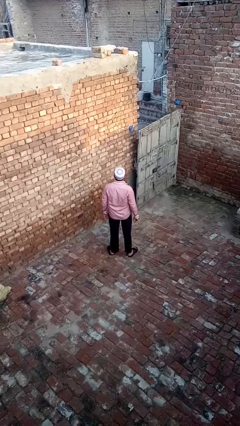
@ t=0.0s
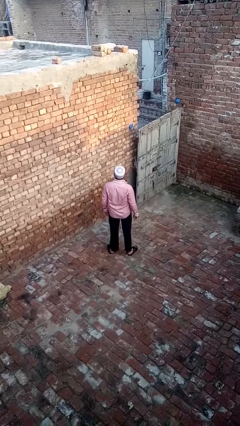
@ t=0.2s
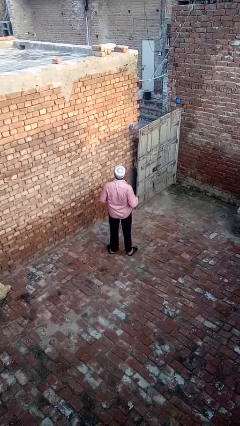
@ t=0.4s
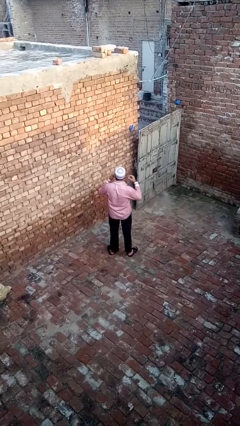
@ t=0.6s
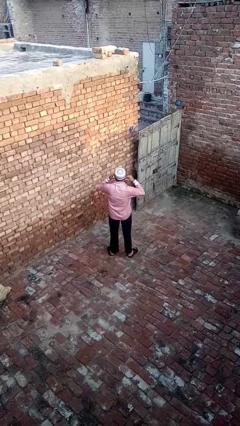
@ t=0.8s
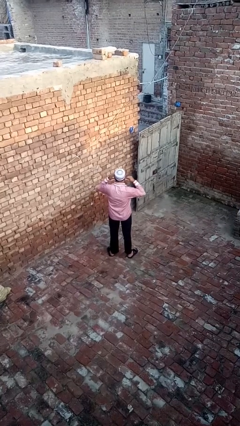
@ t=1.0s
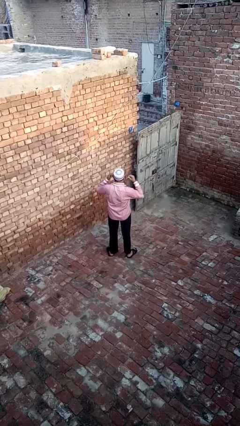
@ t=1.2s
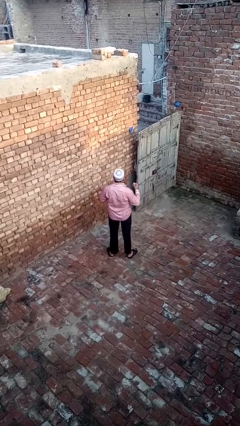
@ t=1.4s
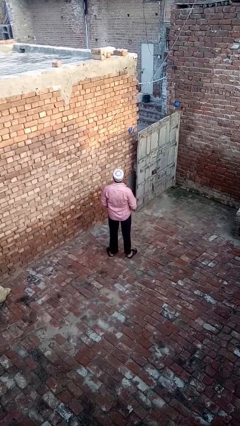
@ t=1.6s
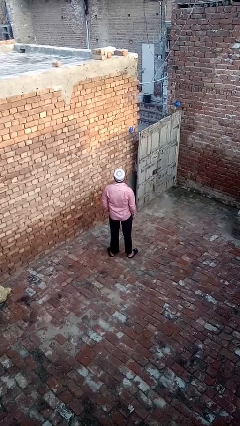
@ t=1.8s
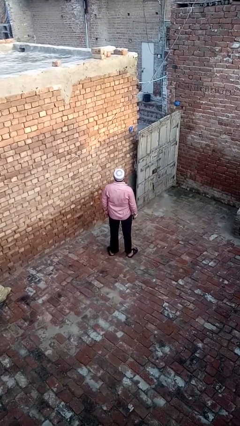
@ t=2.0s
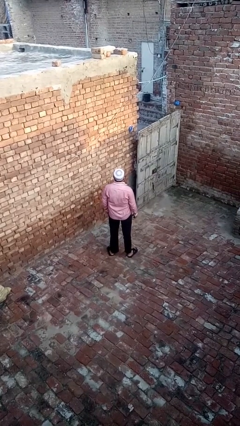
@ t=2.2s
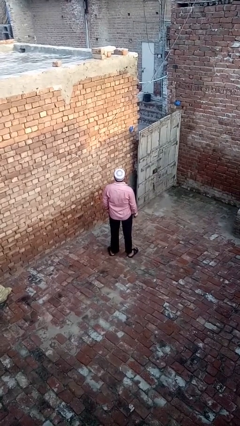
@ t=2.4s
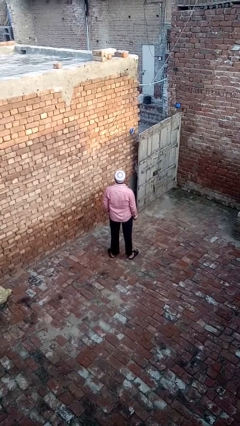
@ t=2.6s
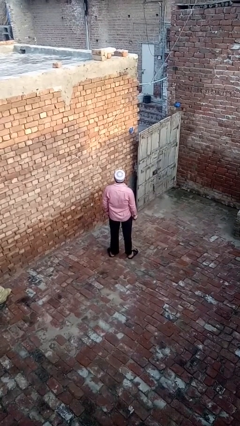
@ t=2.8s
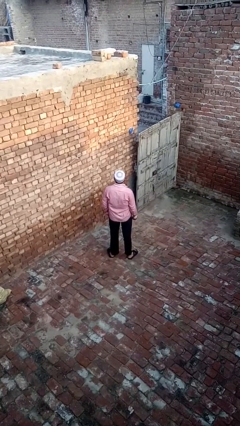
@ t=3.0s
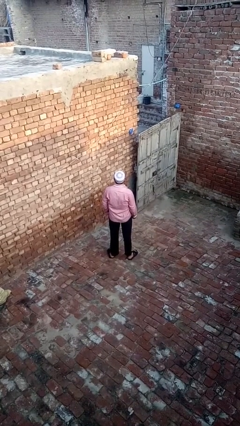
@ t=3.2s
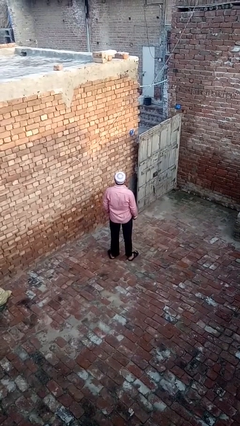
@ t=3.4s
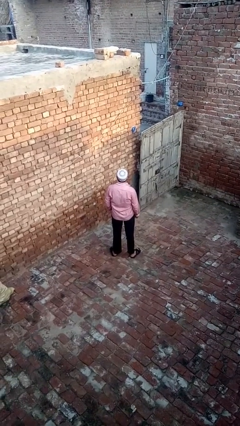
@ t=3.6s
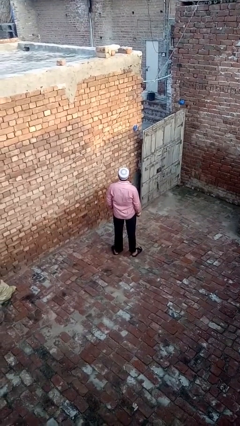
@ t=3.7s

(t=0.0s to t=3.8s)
person takes off headphones

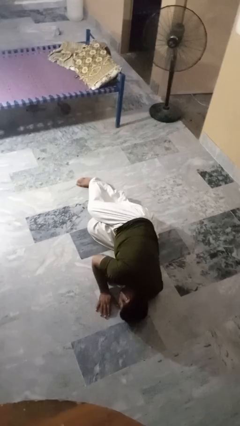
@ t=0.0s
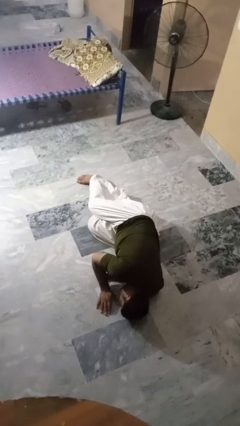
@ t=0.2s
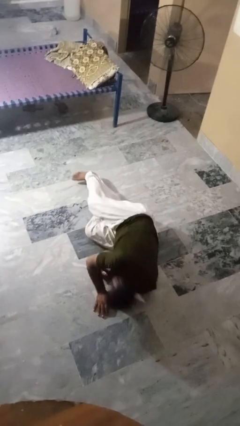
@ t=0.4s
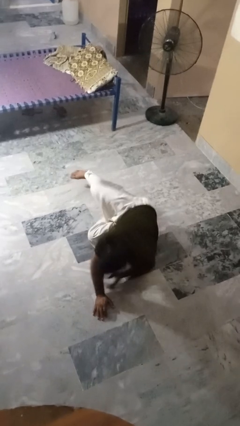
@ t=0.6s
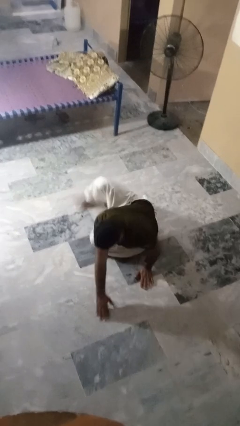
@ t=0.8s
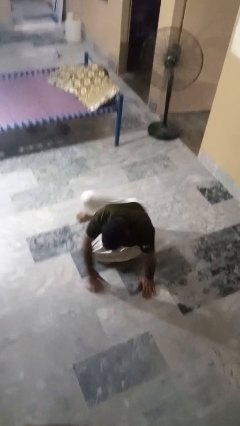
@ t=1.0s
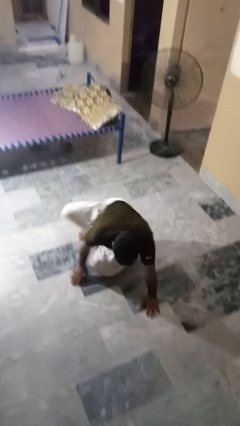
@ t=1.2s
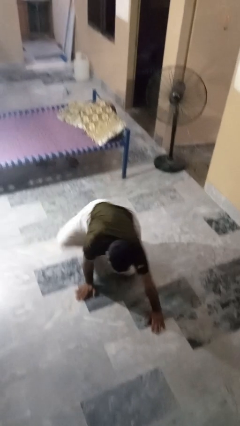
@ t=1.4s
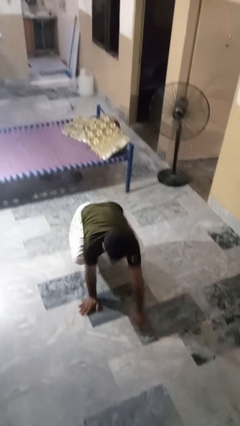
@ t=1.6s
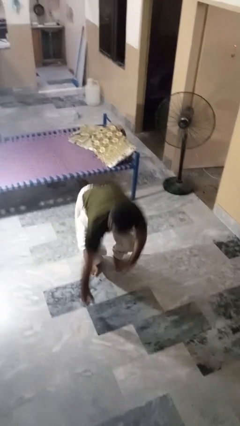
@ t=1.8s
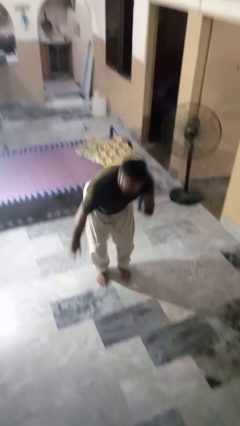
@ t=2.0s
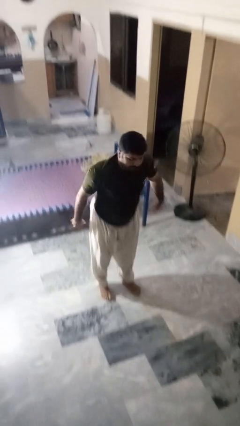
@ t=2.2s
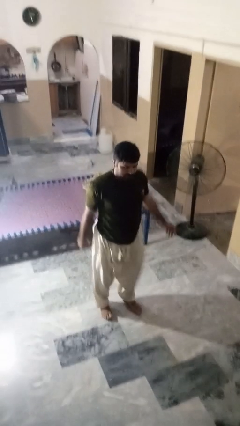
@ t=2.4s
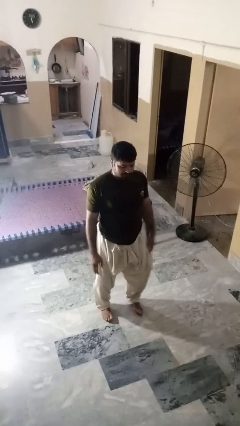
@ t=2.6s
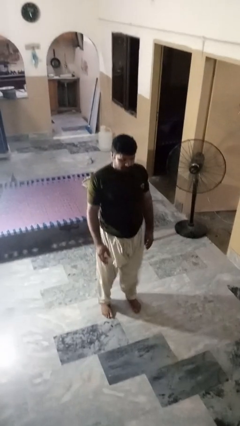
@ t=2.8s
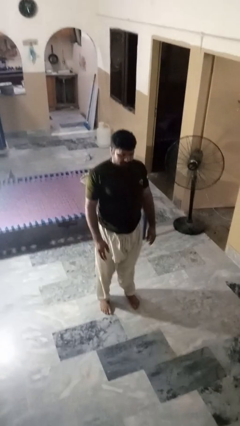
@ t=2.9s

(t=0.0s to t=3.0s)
person stands up from floor

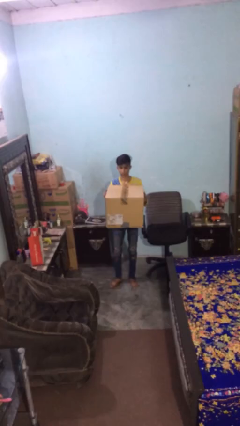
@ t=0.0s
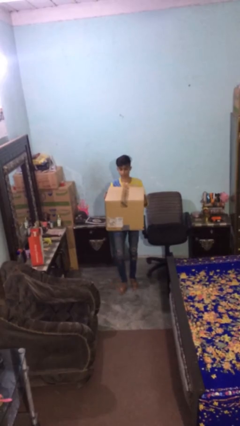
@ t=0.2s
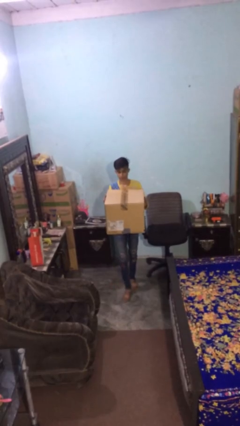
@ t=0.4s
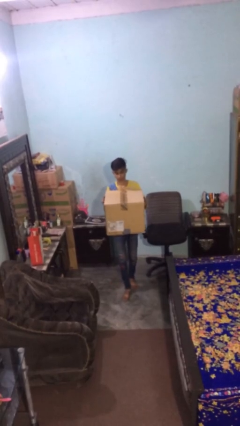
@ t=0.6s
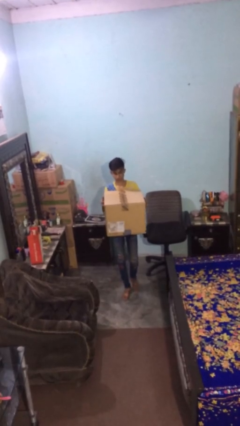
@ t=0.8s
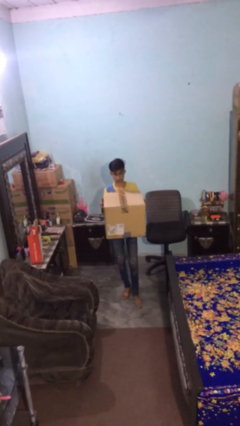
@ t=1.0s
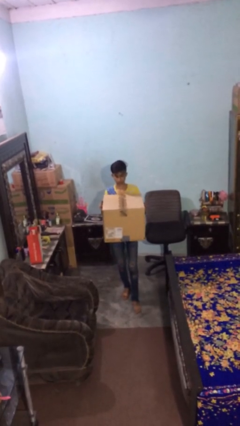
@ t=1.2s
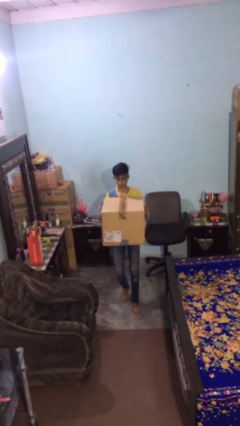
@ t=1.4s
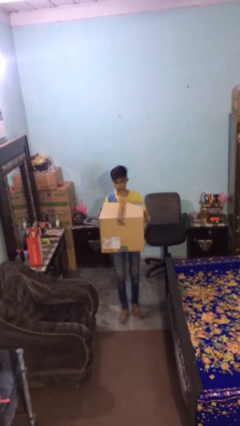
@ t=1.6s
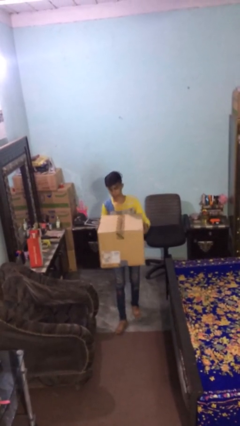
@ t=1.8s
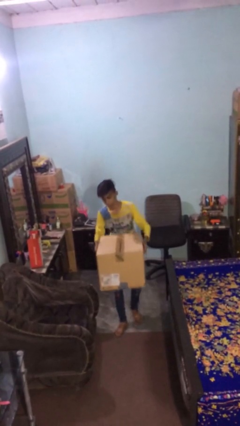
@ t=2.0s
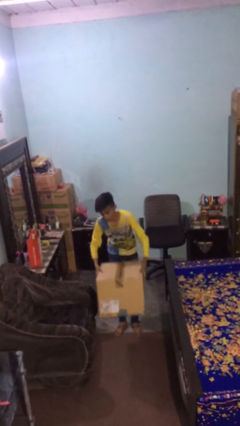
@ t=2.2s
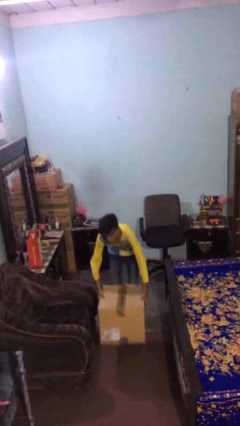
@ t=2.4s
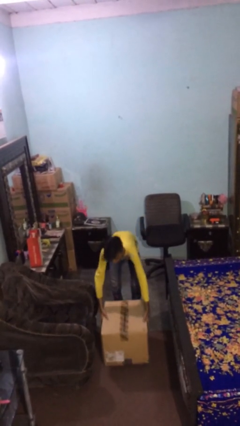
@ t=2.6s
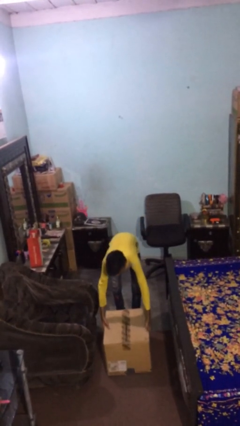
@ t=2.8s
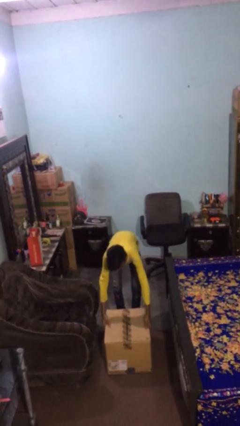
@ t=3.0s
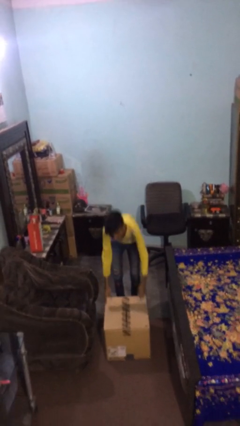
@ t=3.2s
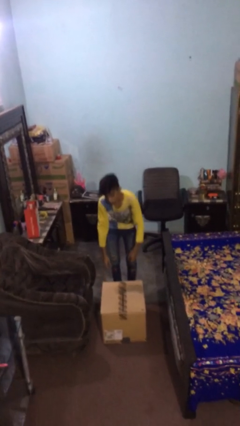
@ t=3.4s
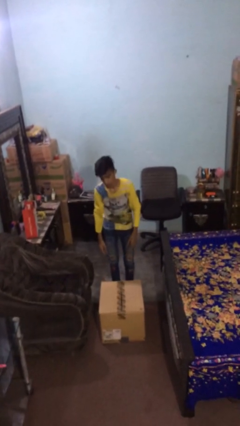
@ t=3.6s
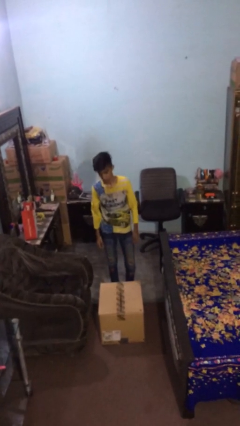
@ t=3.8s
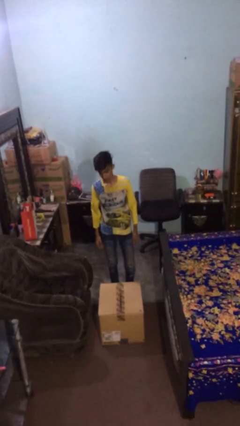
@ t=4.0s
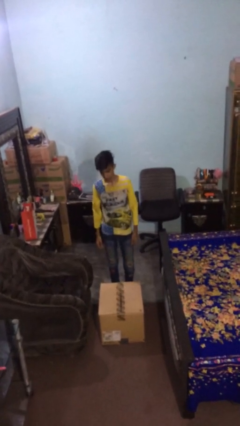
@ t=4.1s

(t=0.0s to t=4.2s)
person puts down object on floor

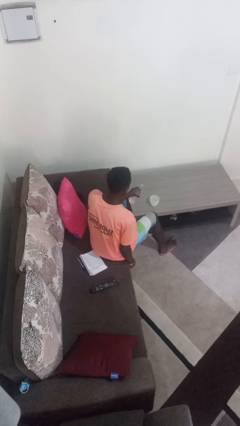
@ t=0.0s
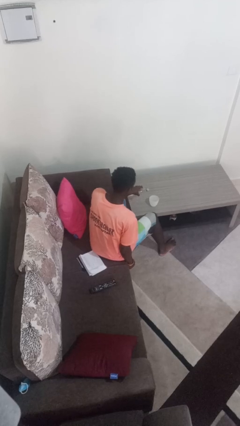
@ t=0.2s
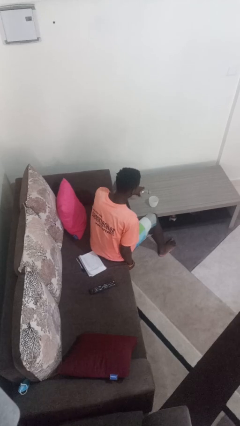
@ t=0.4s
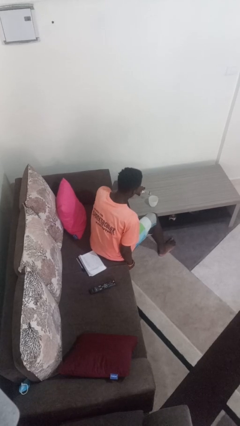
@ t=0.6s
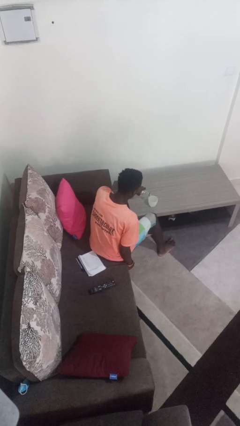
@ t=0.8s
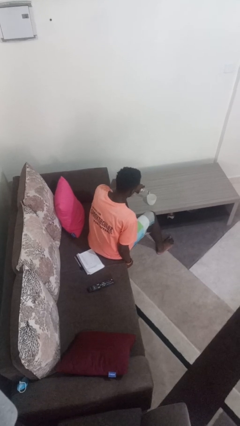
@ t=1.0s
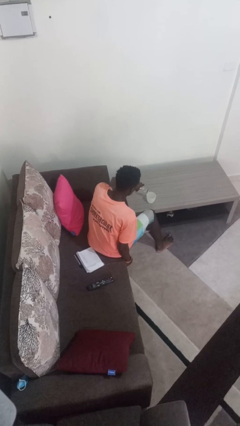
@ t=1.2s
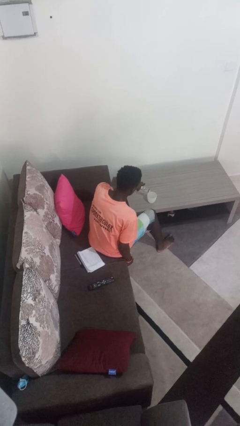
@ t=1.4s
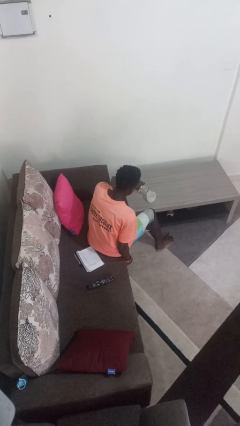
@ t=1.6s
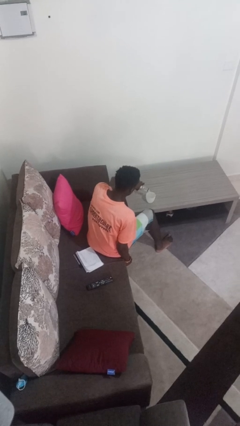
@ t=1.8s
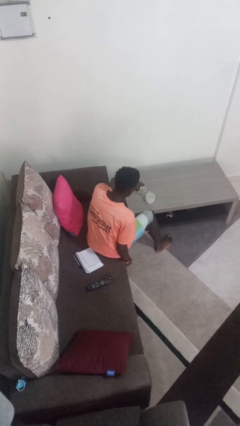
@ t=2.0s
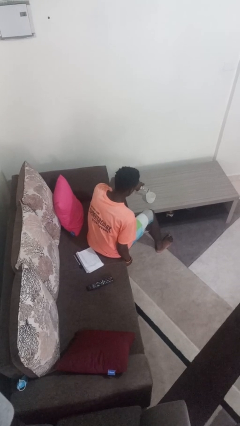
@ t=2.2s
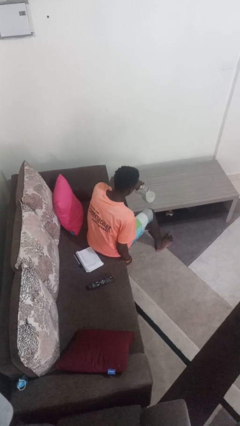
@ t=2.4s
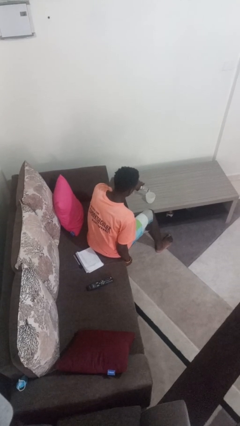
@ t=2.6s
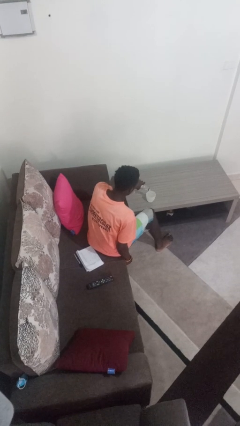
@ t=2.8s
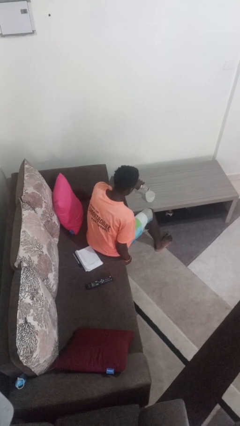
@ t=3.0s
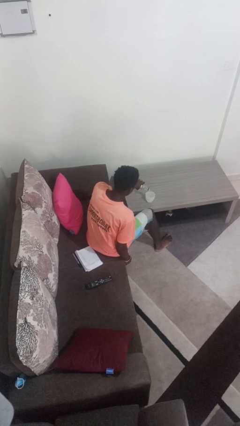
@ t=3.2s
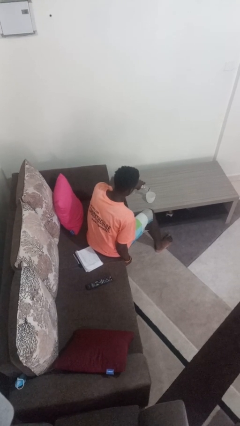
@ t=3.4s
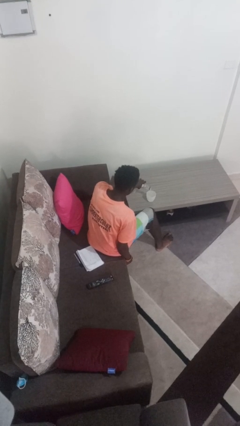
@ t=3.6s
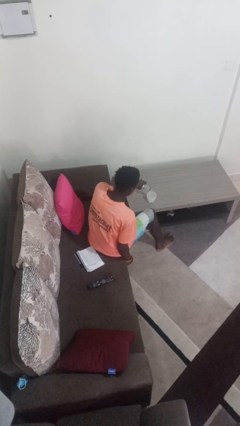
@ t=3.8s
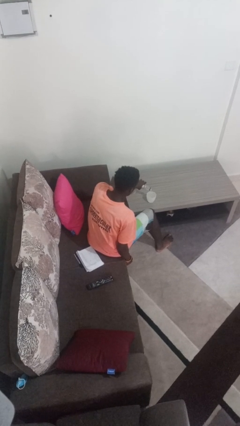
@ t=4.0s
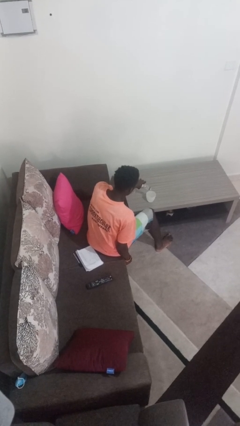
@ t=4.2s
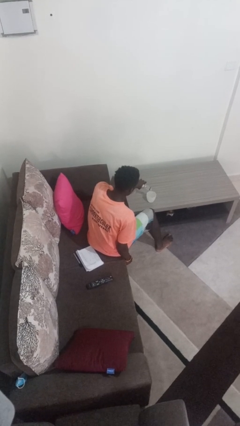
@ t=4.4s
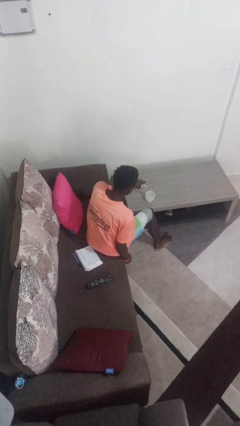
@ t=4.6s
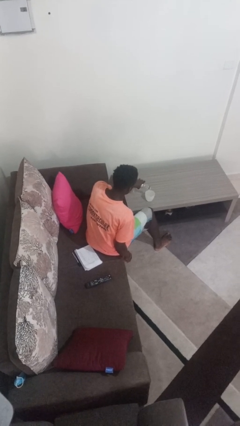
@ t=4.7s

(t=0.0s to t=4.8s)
person pours liquid into cup

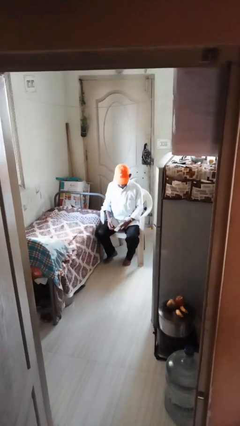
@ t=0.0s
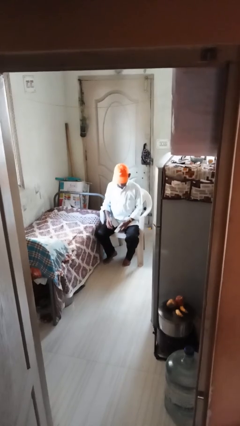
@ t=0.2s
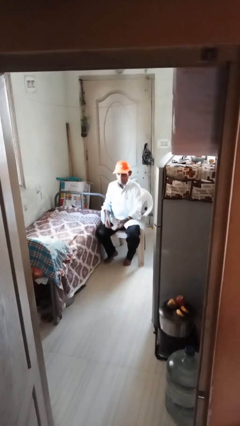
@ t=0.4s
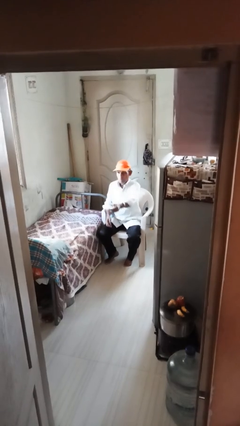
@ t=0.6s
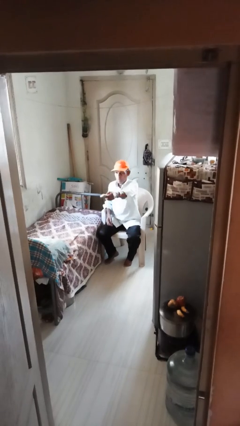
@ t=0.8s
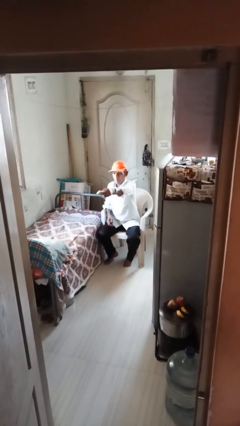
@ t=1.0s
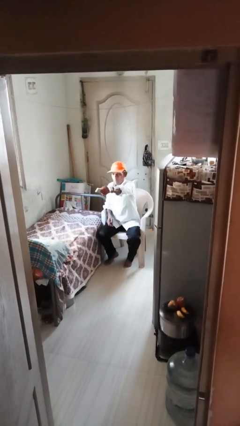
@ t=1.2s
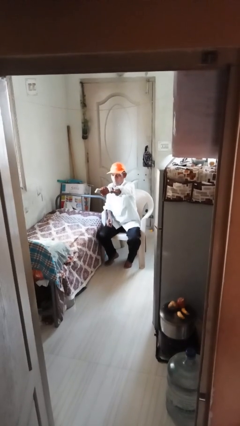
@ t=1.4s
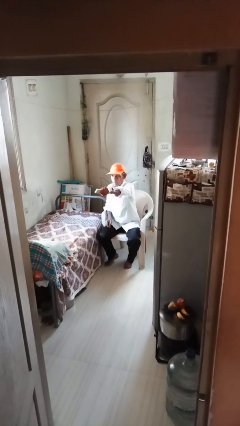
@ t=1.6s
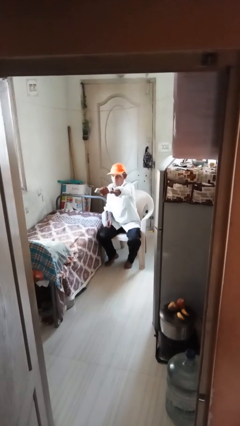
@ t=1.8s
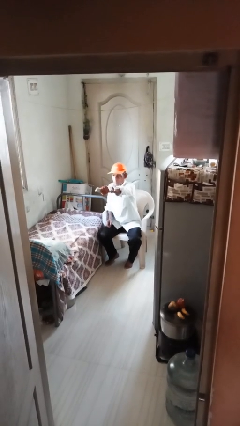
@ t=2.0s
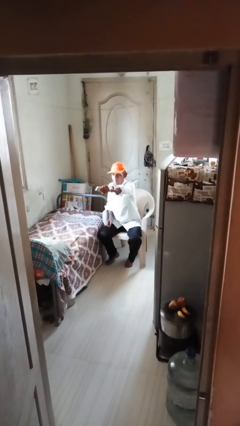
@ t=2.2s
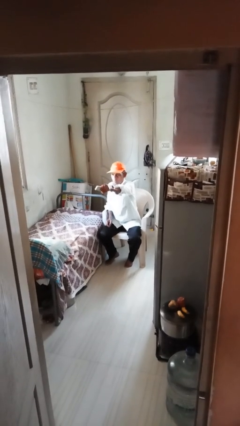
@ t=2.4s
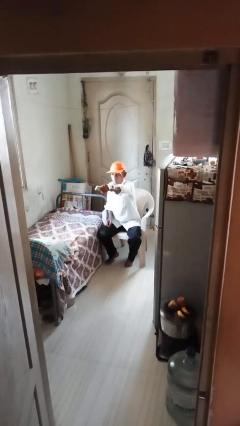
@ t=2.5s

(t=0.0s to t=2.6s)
person uses television remote
